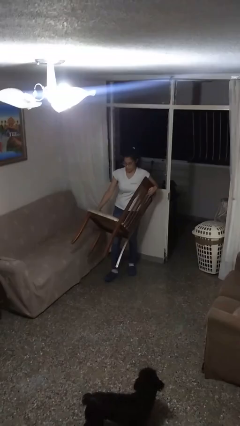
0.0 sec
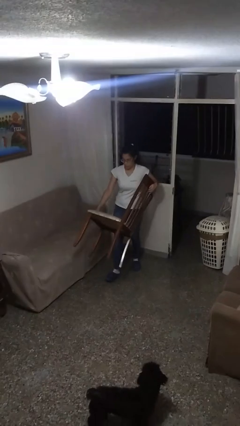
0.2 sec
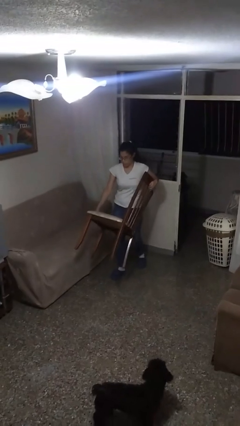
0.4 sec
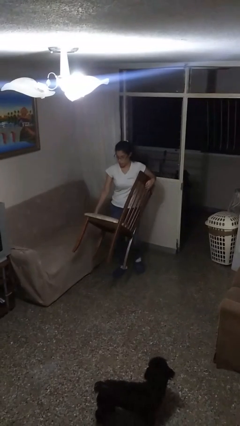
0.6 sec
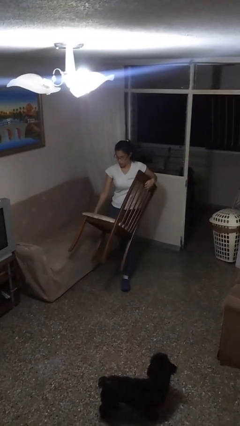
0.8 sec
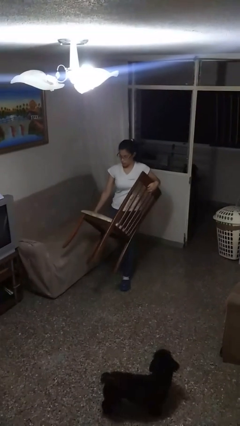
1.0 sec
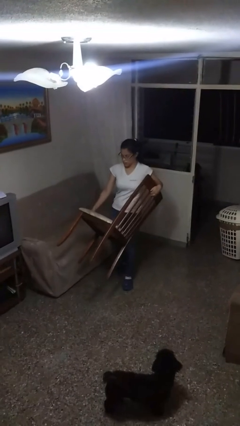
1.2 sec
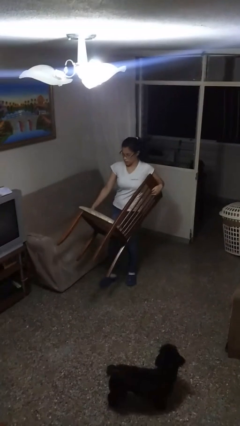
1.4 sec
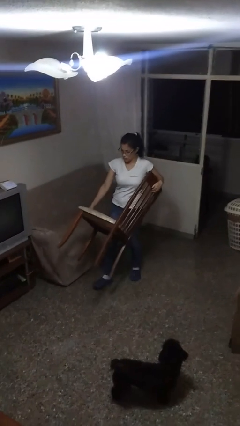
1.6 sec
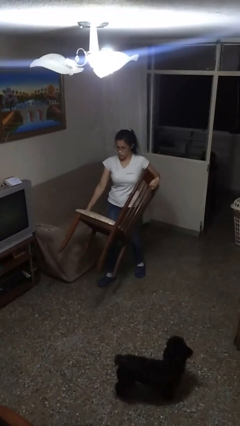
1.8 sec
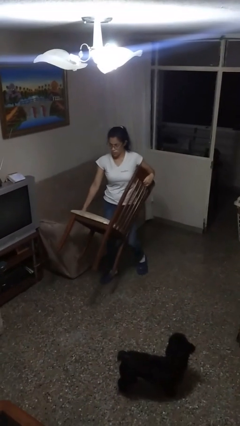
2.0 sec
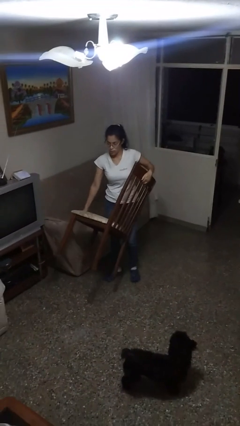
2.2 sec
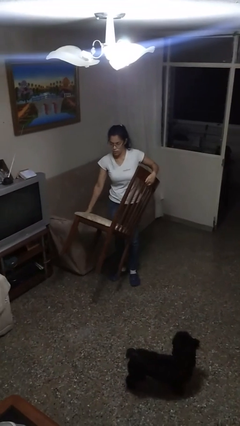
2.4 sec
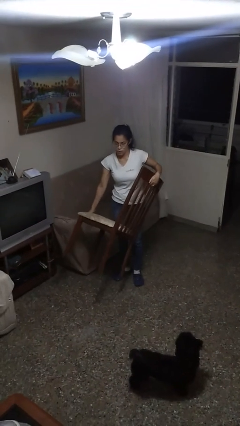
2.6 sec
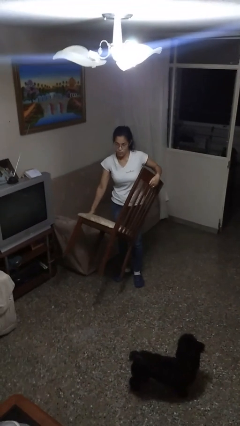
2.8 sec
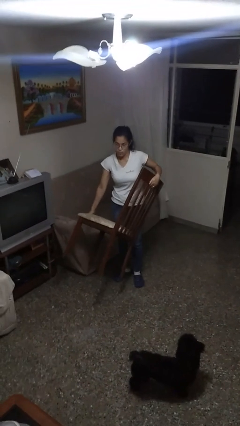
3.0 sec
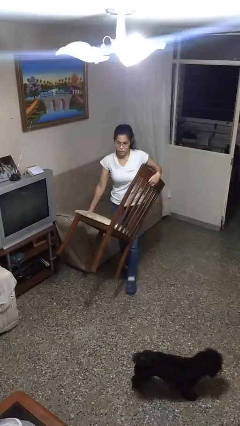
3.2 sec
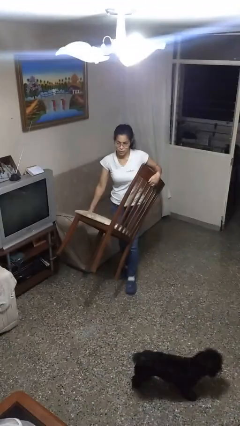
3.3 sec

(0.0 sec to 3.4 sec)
person carries furniture

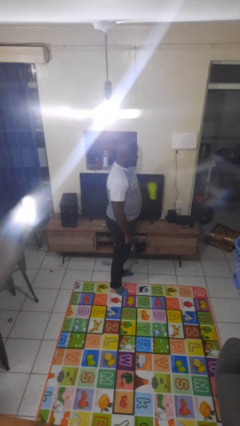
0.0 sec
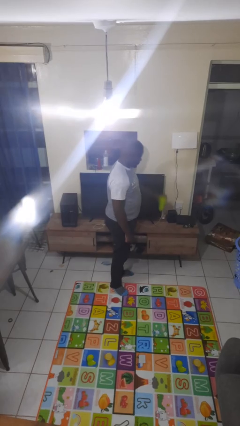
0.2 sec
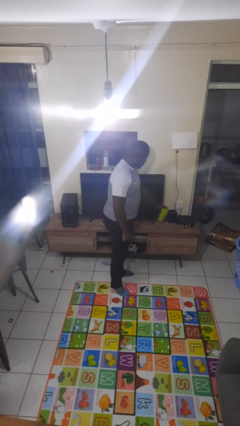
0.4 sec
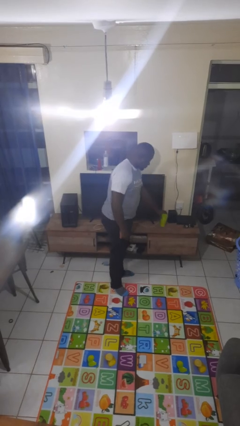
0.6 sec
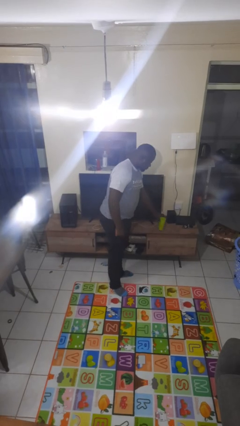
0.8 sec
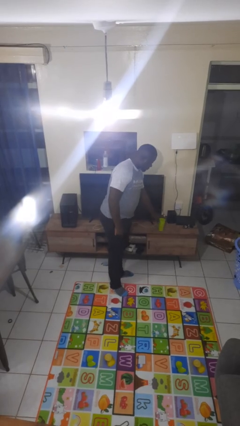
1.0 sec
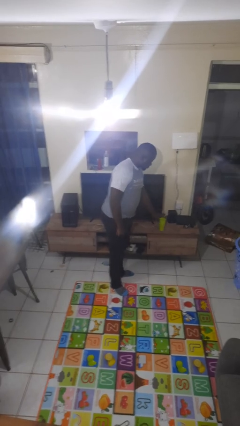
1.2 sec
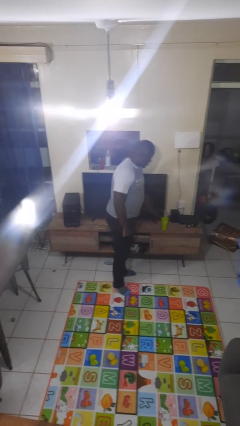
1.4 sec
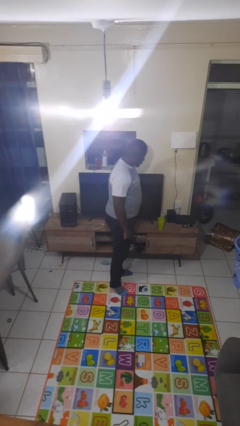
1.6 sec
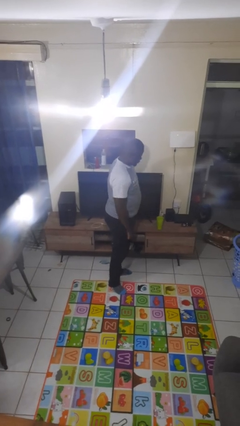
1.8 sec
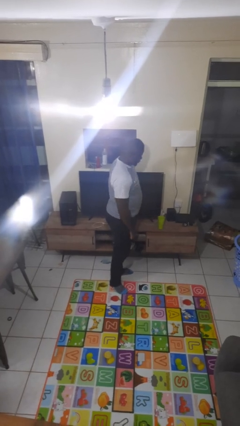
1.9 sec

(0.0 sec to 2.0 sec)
person puts down object on countertop

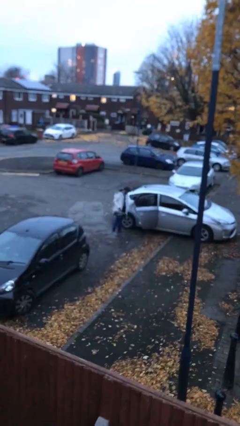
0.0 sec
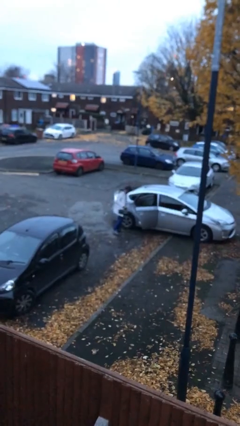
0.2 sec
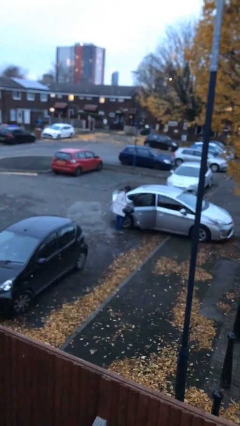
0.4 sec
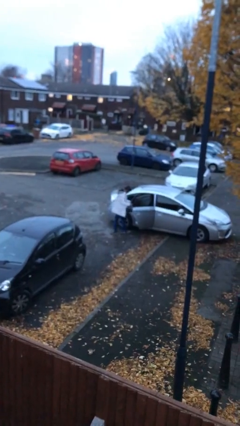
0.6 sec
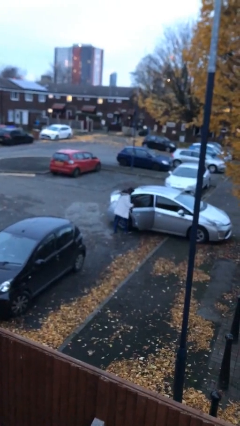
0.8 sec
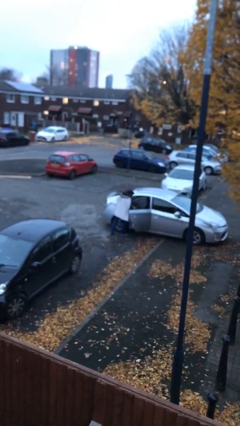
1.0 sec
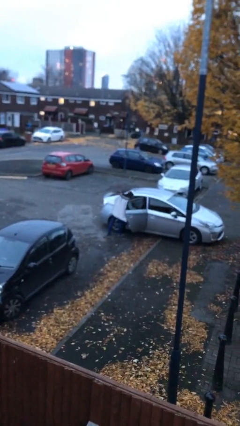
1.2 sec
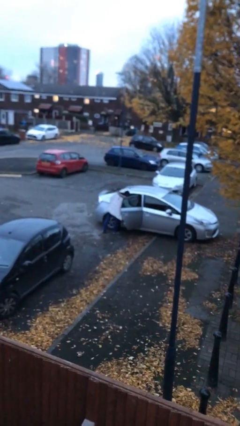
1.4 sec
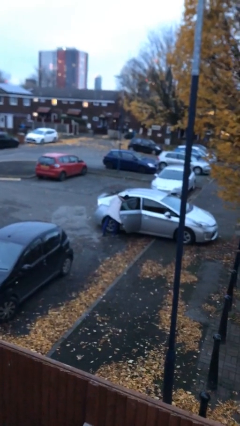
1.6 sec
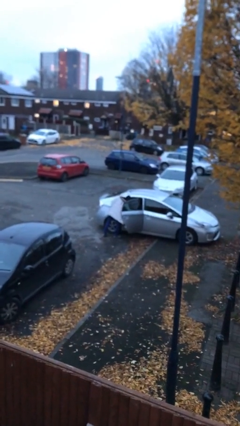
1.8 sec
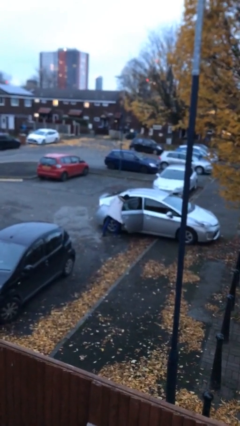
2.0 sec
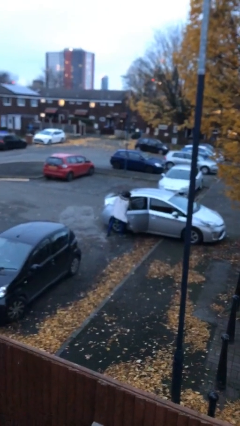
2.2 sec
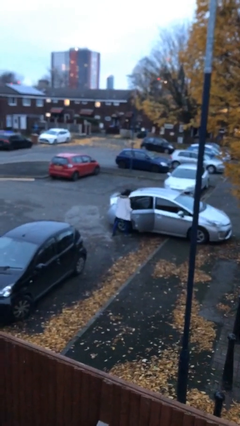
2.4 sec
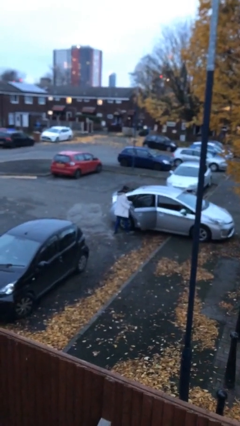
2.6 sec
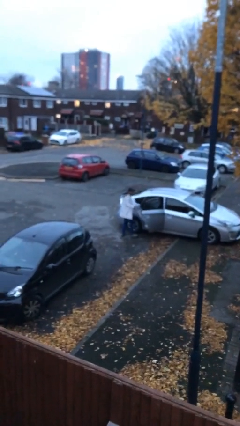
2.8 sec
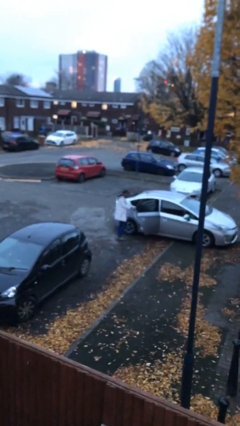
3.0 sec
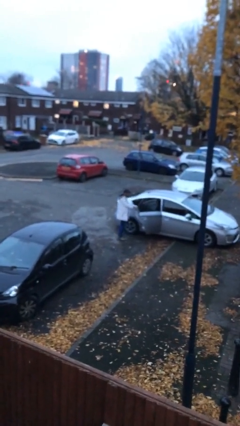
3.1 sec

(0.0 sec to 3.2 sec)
person loads car

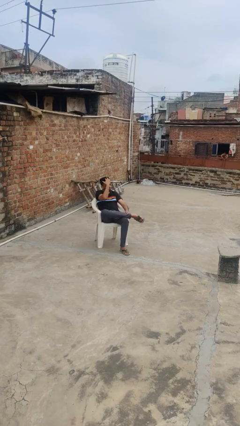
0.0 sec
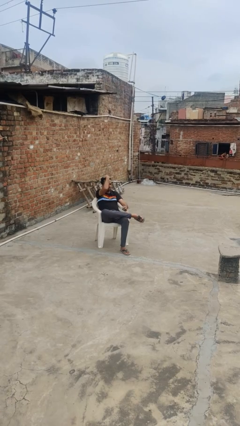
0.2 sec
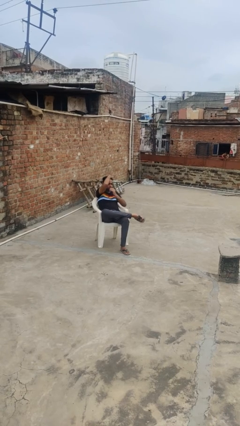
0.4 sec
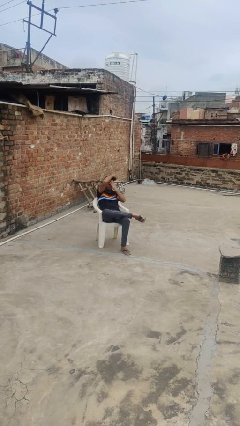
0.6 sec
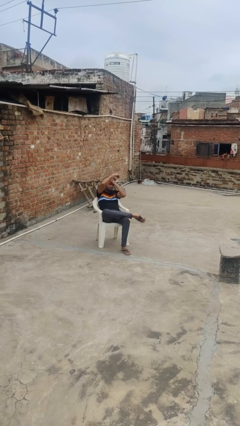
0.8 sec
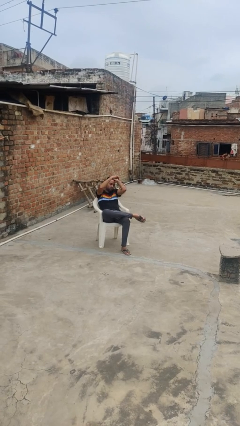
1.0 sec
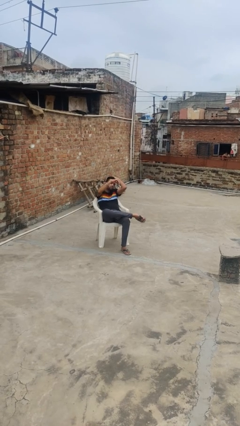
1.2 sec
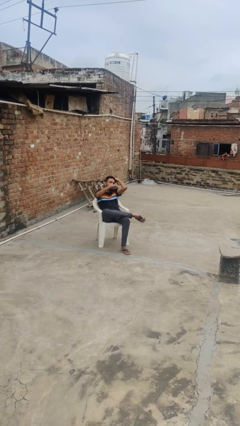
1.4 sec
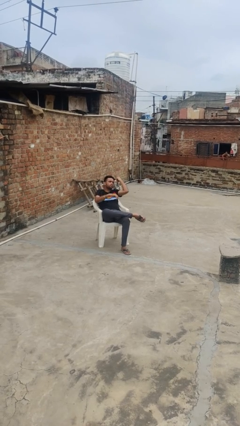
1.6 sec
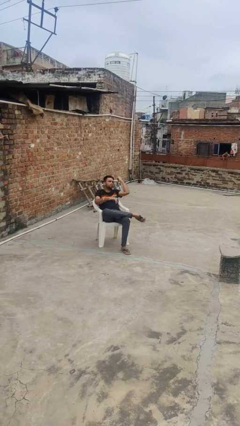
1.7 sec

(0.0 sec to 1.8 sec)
person strokes hair

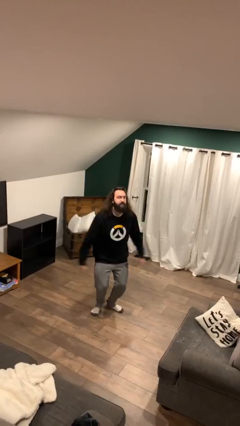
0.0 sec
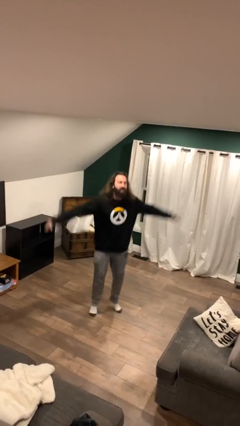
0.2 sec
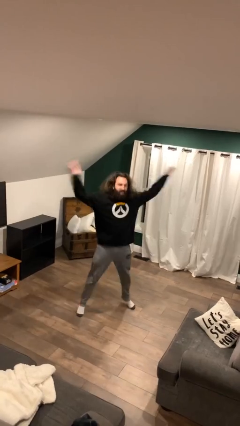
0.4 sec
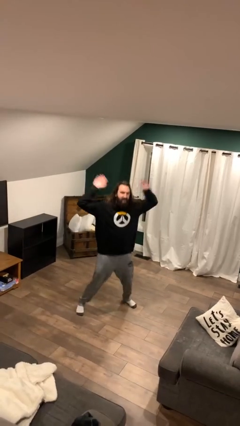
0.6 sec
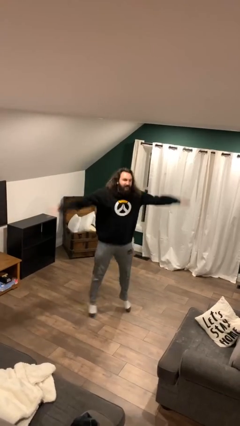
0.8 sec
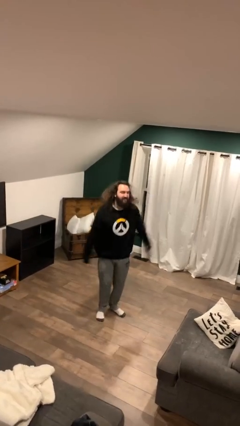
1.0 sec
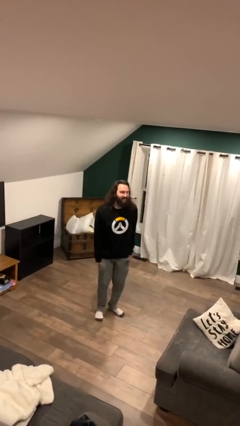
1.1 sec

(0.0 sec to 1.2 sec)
person exercises with jumping jacks

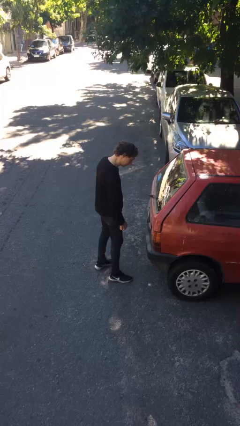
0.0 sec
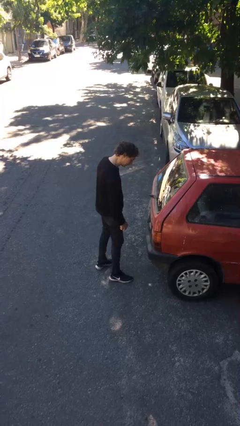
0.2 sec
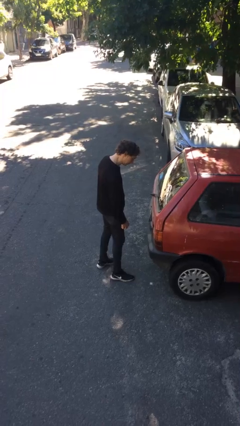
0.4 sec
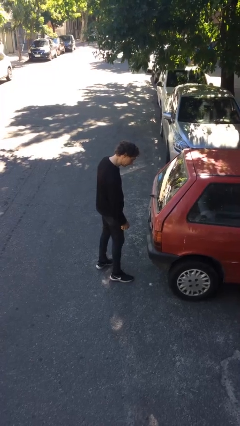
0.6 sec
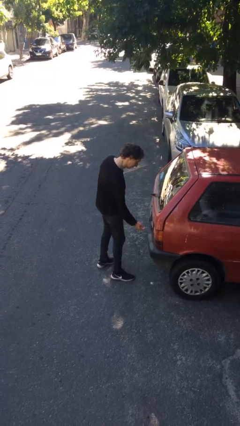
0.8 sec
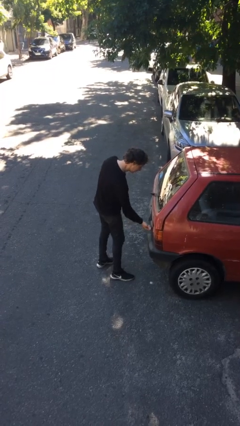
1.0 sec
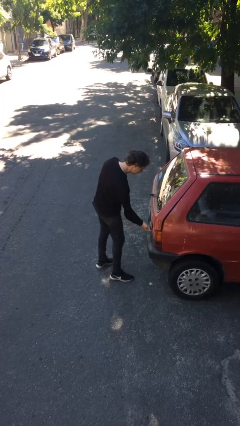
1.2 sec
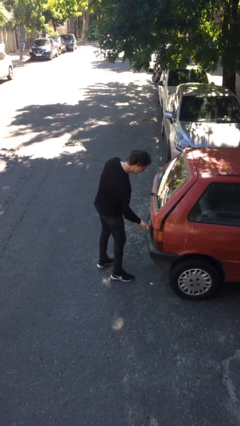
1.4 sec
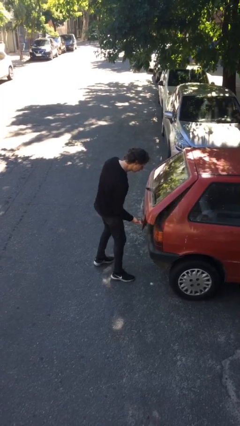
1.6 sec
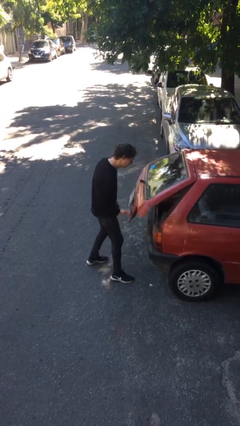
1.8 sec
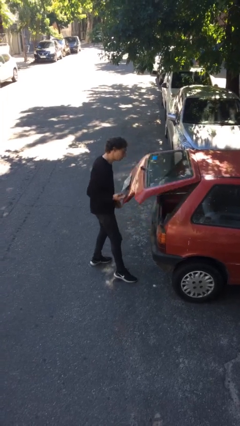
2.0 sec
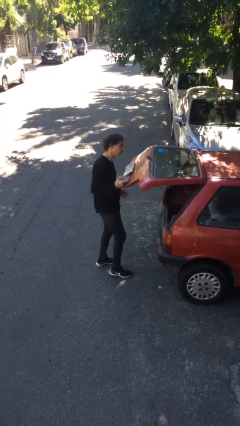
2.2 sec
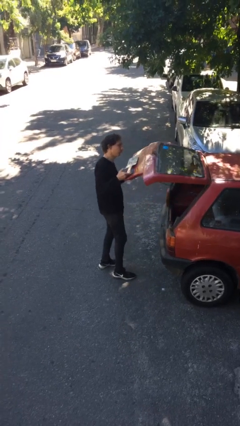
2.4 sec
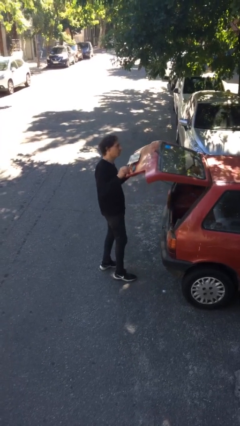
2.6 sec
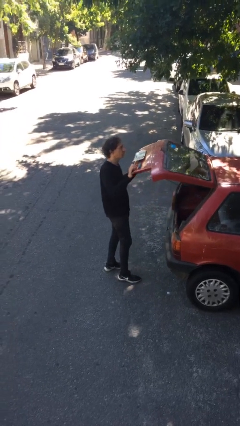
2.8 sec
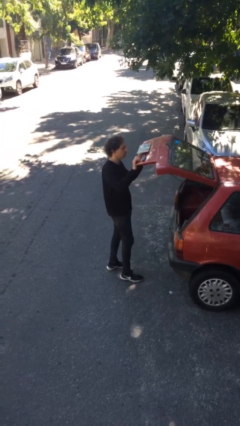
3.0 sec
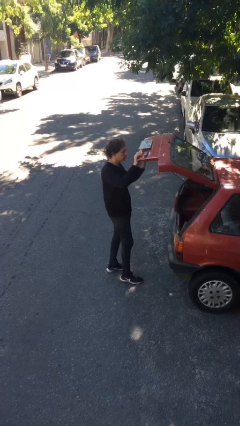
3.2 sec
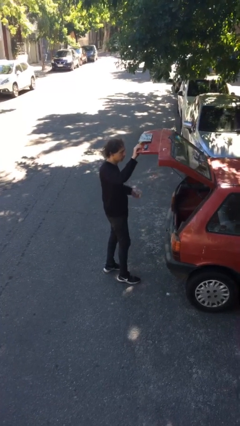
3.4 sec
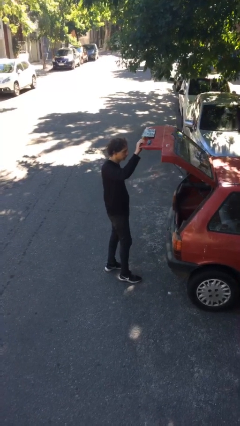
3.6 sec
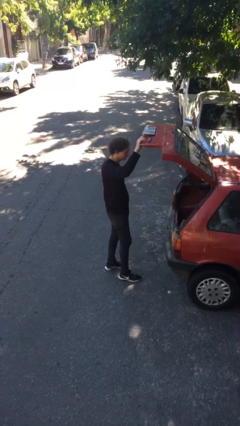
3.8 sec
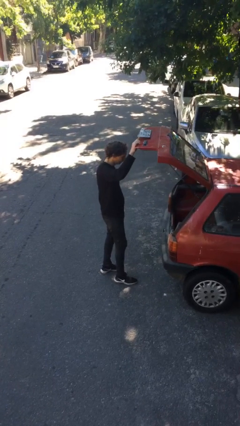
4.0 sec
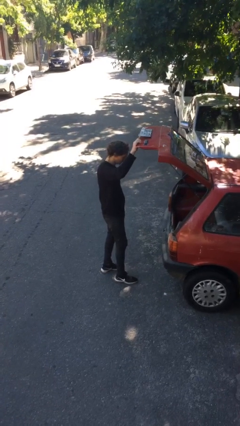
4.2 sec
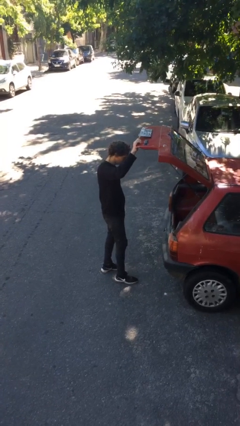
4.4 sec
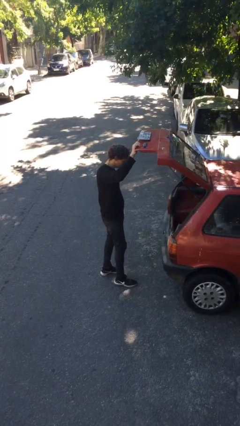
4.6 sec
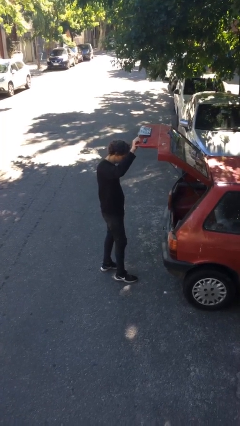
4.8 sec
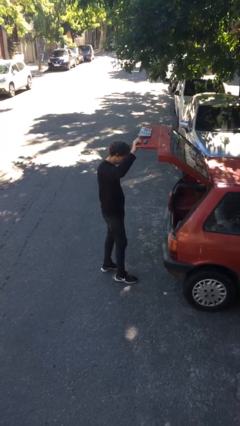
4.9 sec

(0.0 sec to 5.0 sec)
person opens car trunk

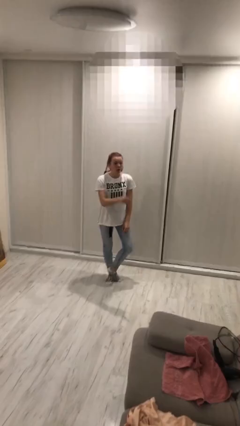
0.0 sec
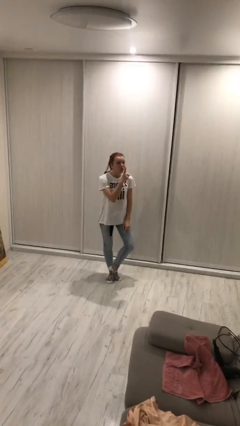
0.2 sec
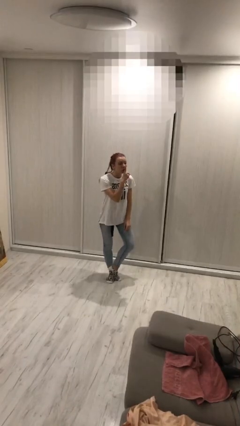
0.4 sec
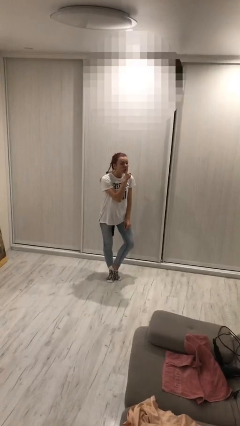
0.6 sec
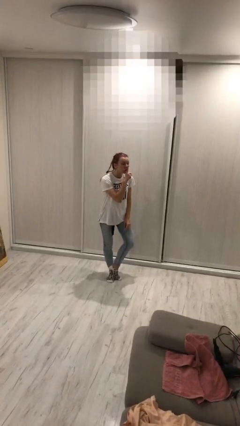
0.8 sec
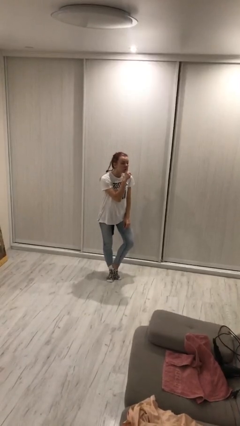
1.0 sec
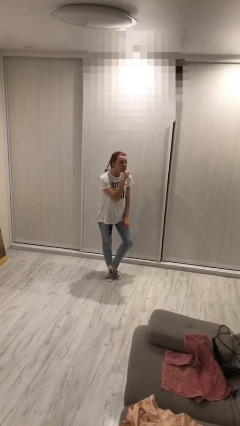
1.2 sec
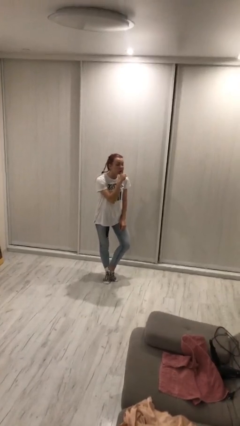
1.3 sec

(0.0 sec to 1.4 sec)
person gestures be quiet
